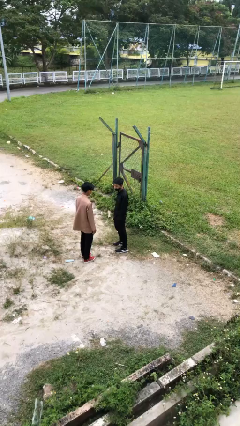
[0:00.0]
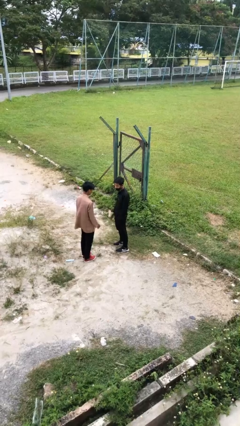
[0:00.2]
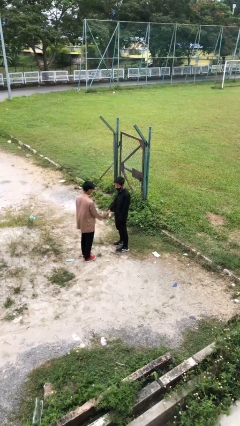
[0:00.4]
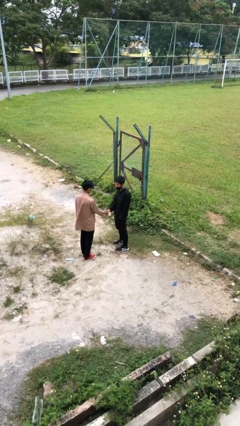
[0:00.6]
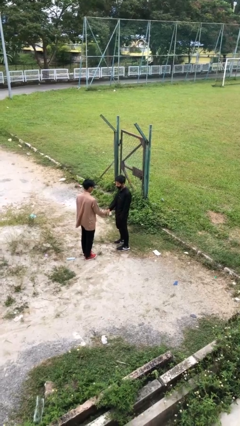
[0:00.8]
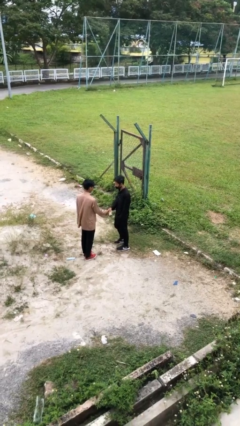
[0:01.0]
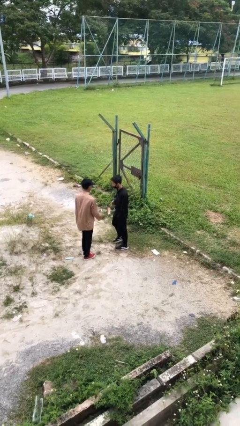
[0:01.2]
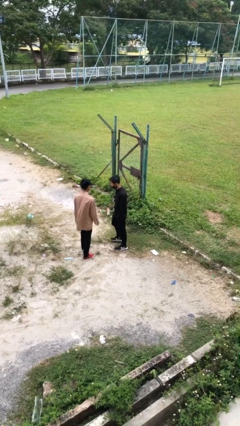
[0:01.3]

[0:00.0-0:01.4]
person shakes hand

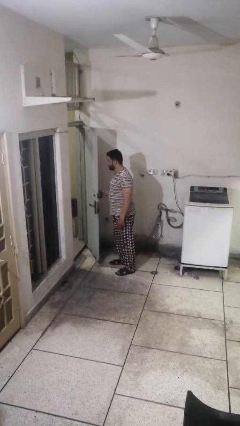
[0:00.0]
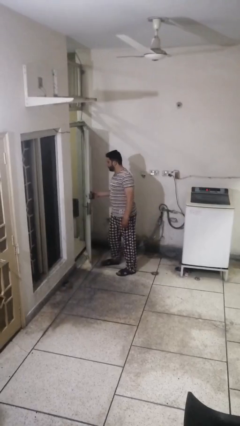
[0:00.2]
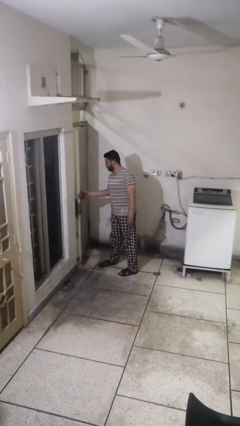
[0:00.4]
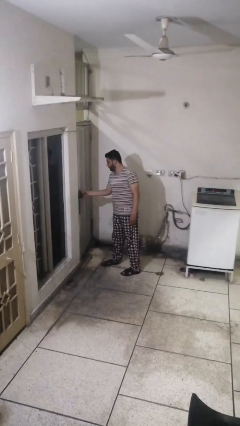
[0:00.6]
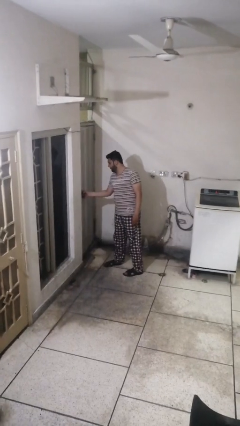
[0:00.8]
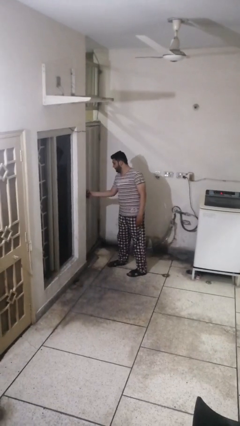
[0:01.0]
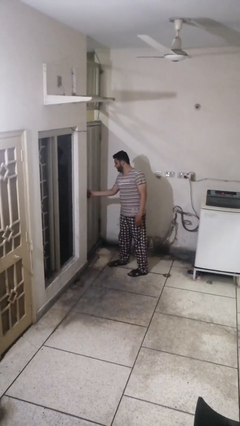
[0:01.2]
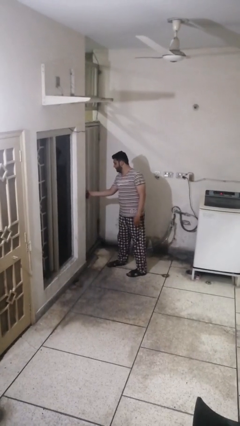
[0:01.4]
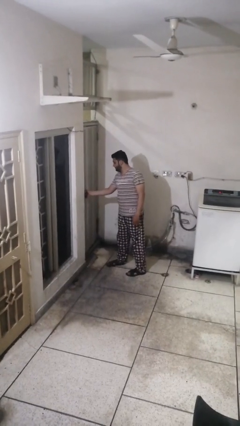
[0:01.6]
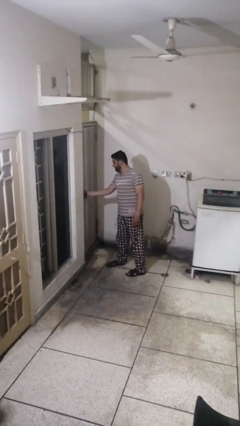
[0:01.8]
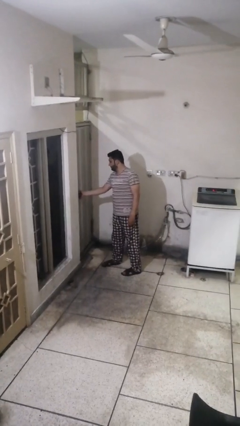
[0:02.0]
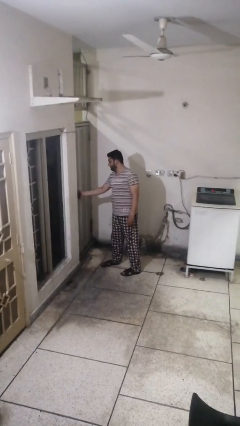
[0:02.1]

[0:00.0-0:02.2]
person closes facility door

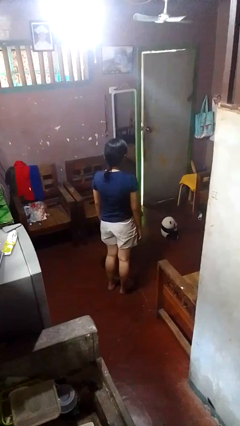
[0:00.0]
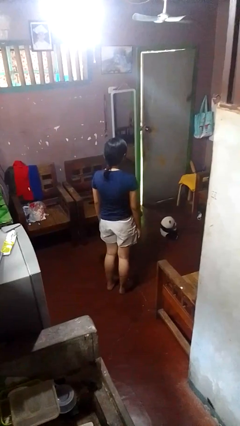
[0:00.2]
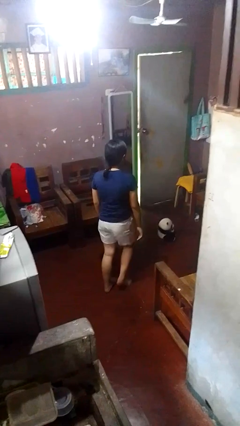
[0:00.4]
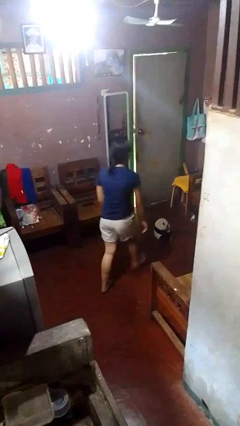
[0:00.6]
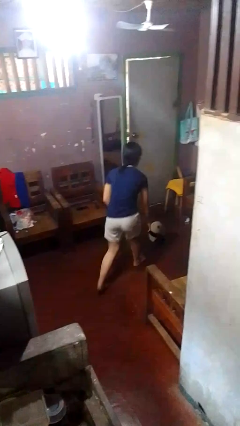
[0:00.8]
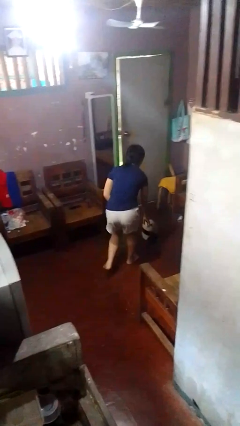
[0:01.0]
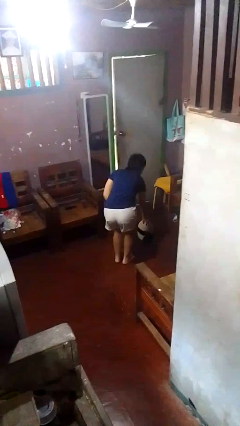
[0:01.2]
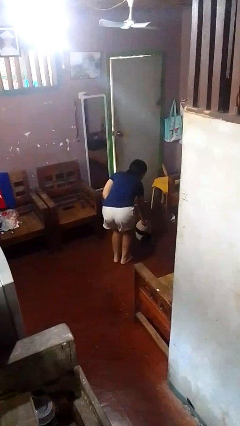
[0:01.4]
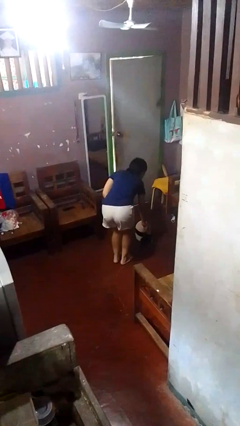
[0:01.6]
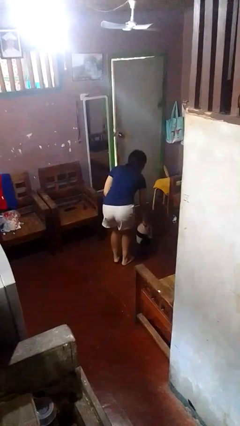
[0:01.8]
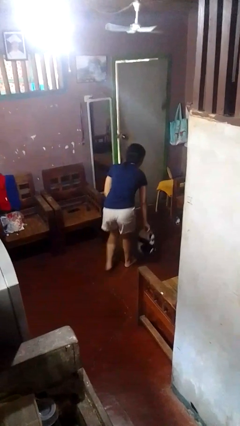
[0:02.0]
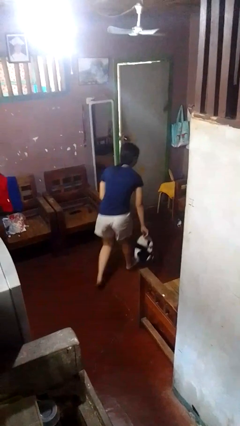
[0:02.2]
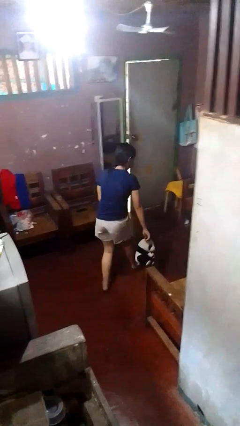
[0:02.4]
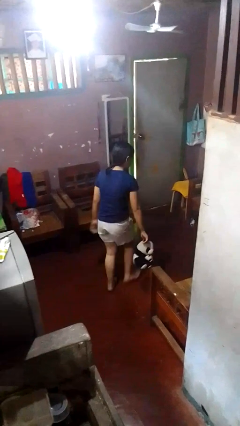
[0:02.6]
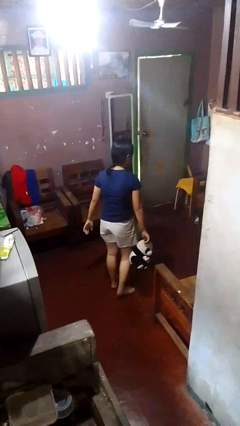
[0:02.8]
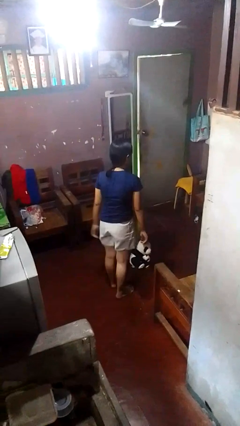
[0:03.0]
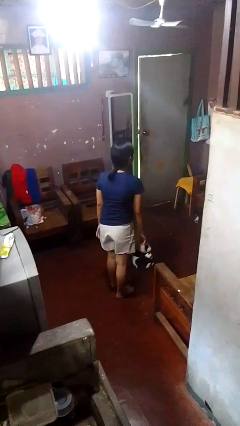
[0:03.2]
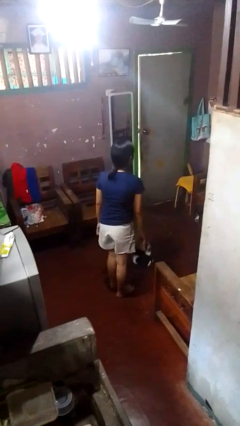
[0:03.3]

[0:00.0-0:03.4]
person picks up object from floor

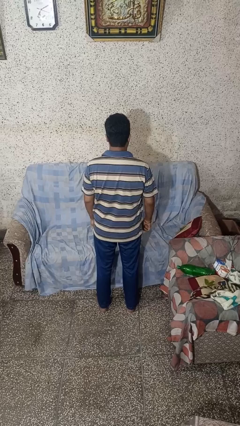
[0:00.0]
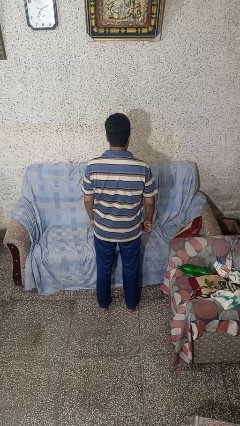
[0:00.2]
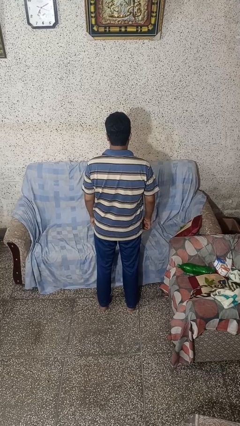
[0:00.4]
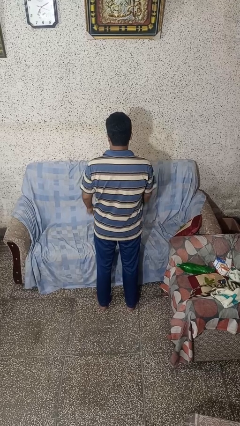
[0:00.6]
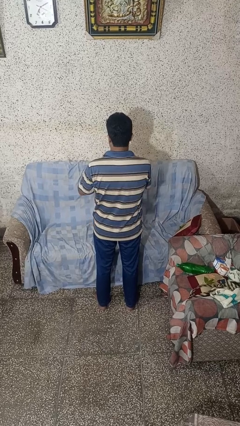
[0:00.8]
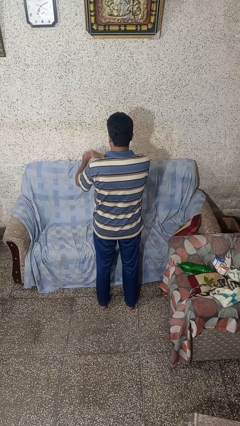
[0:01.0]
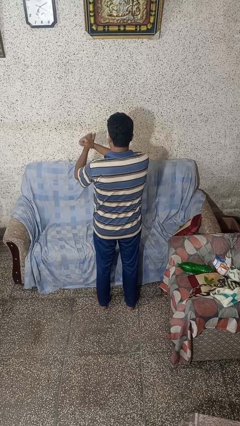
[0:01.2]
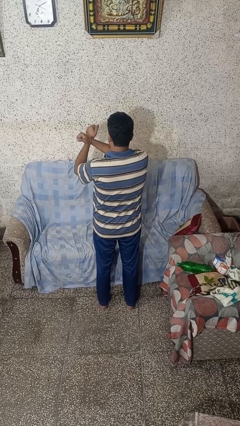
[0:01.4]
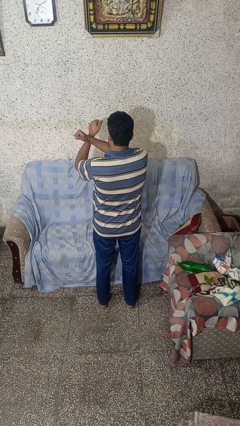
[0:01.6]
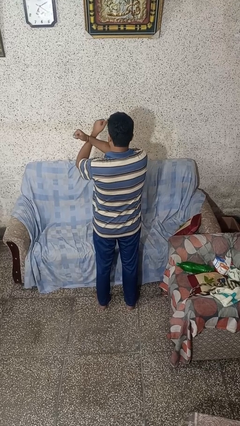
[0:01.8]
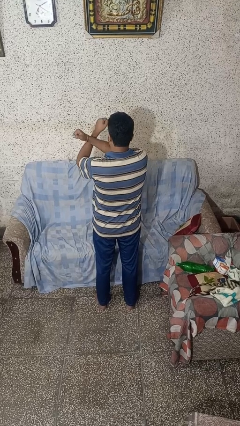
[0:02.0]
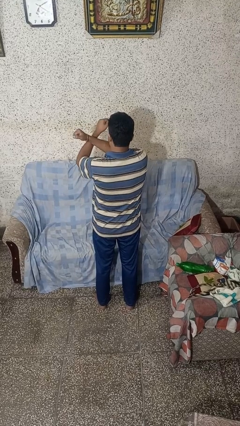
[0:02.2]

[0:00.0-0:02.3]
person gestures arms x

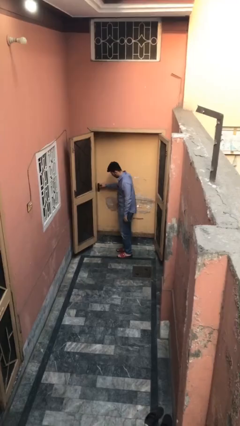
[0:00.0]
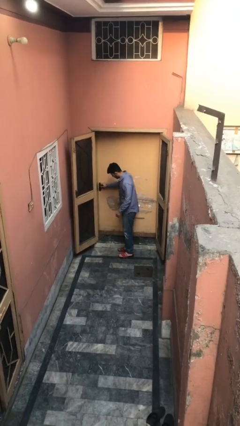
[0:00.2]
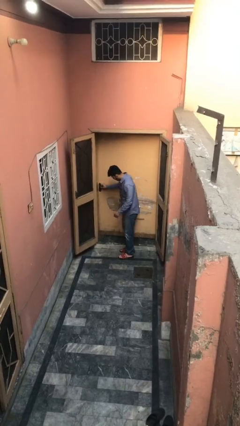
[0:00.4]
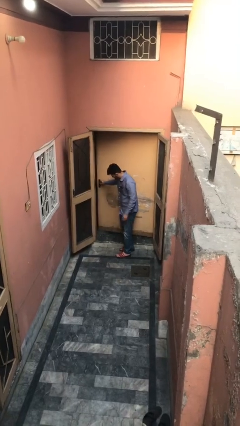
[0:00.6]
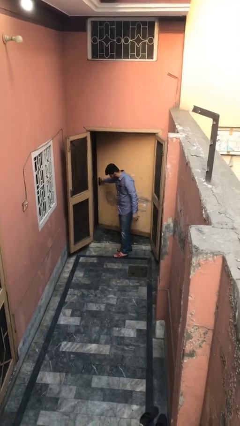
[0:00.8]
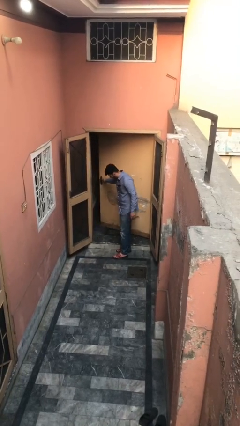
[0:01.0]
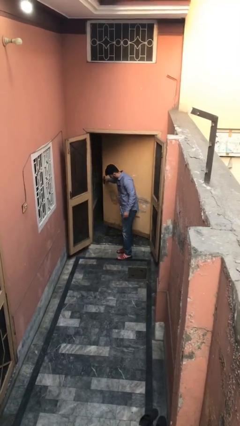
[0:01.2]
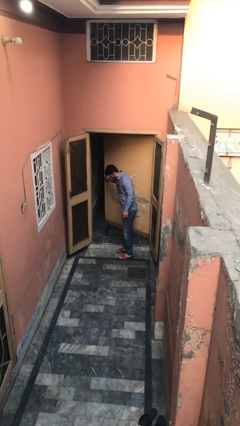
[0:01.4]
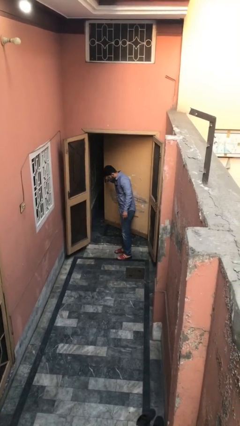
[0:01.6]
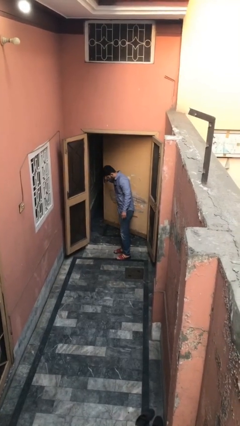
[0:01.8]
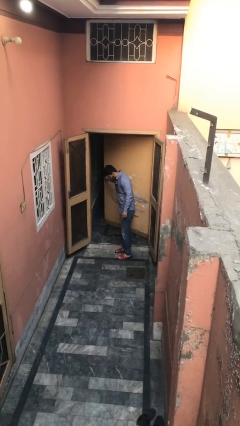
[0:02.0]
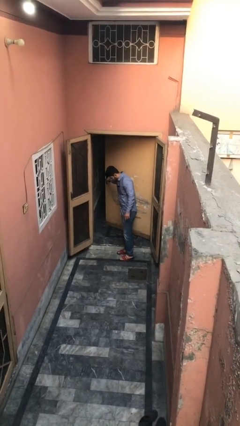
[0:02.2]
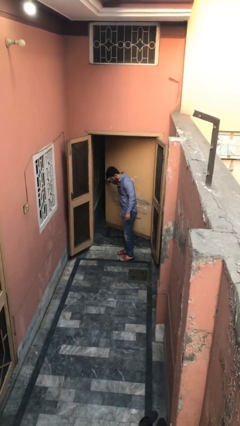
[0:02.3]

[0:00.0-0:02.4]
person opens facility door

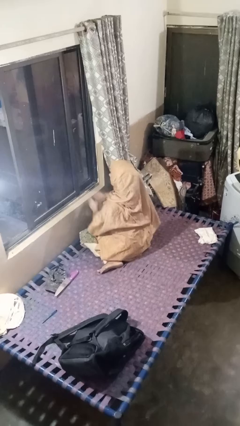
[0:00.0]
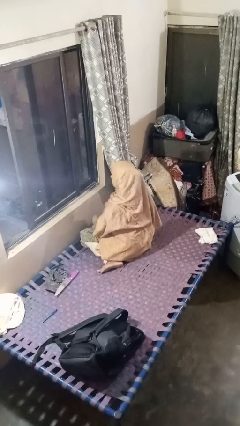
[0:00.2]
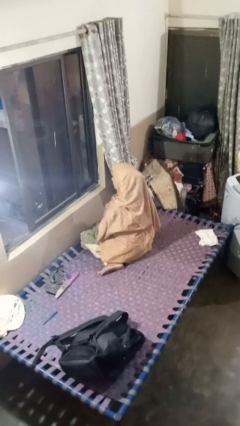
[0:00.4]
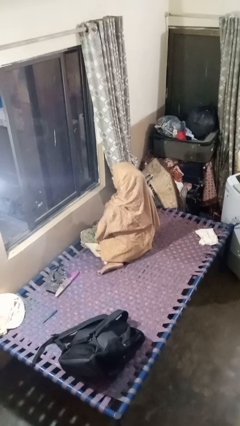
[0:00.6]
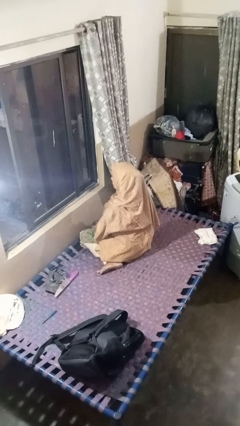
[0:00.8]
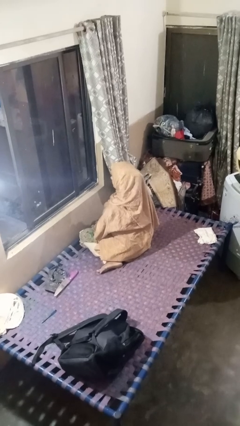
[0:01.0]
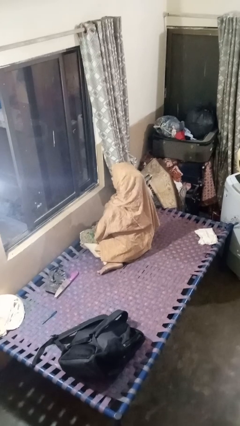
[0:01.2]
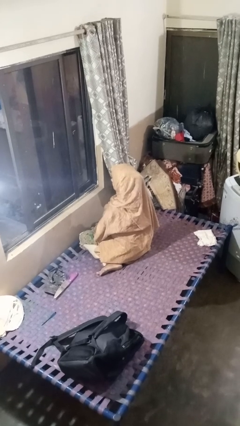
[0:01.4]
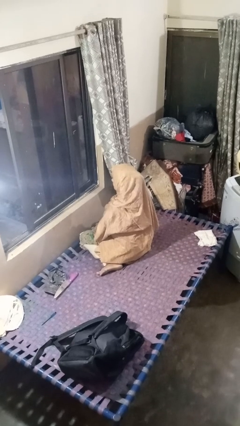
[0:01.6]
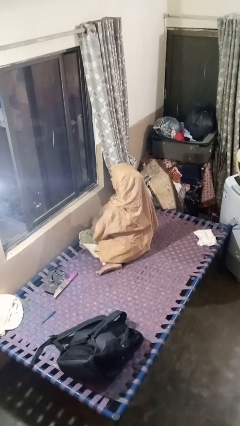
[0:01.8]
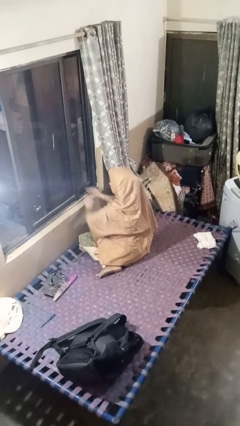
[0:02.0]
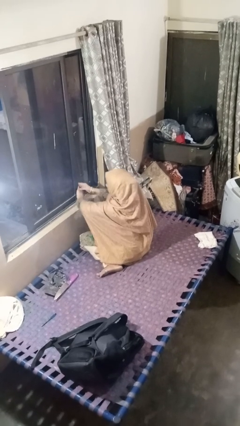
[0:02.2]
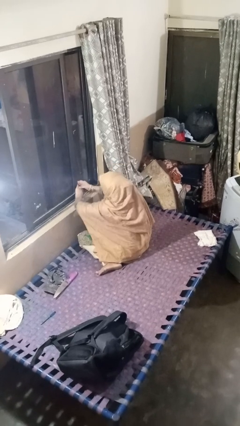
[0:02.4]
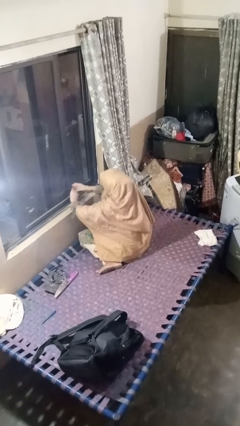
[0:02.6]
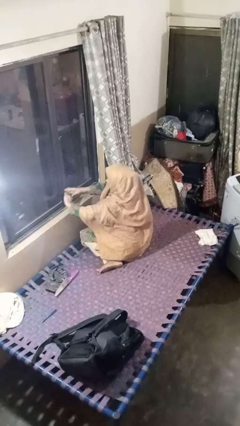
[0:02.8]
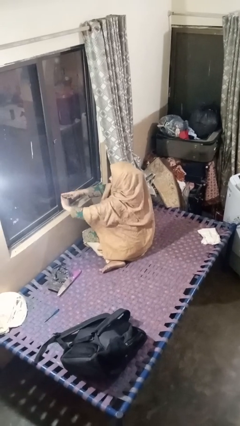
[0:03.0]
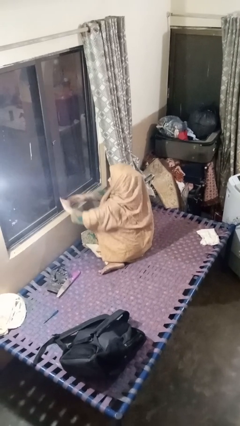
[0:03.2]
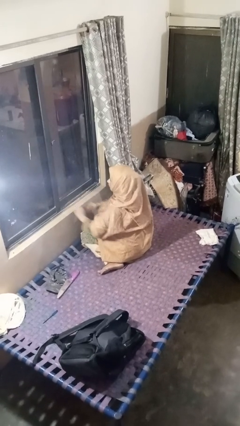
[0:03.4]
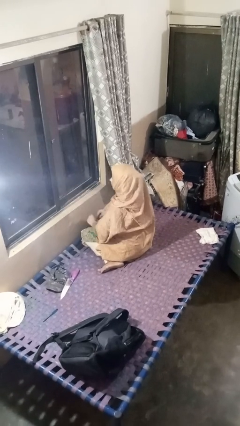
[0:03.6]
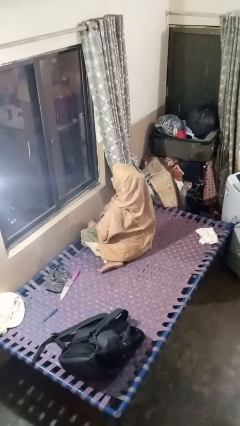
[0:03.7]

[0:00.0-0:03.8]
person closes home window

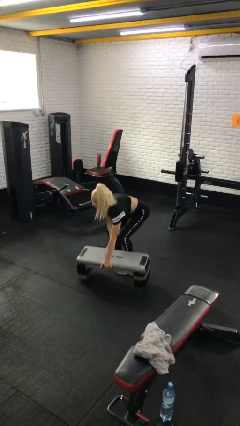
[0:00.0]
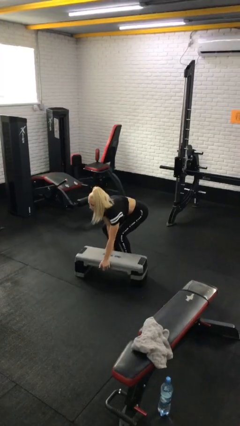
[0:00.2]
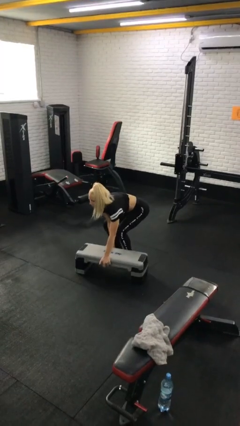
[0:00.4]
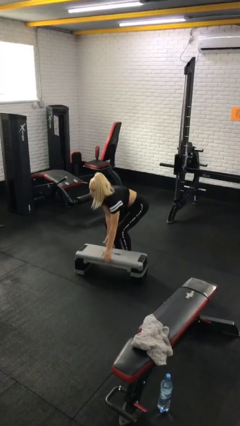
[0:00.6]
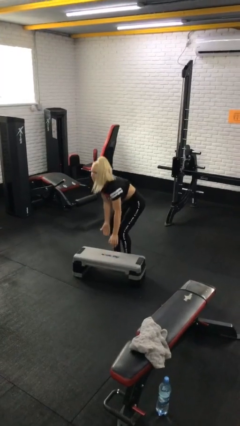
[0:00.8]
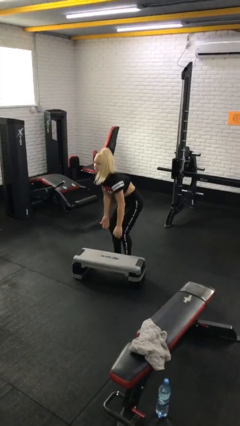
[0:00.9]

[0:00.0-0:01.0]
person puts down object on floor

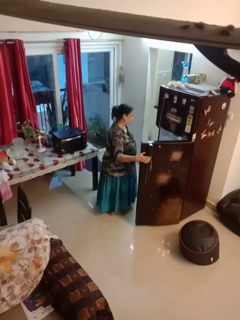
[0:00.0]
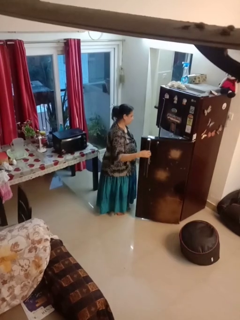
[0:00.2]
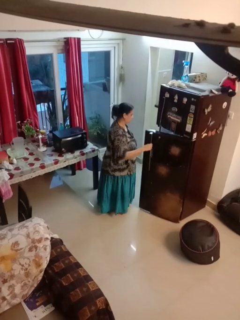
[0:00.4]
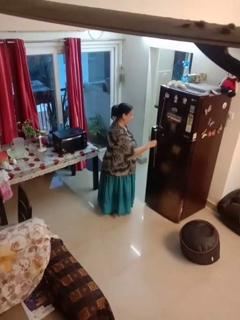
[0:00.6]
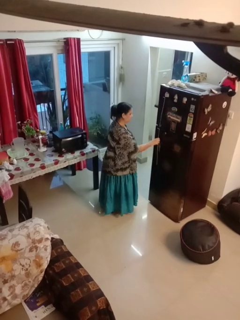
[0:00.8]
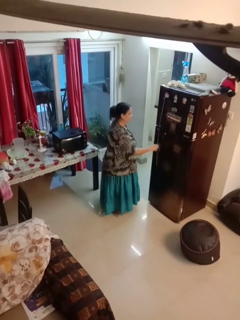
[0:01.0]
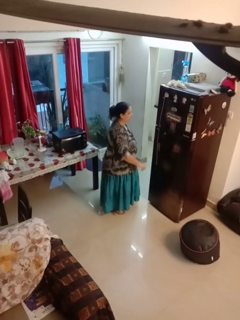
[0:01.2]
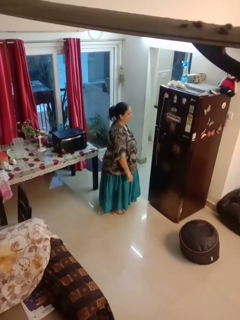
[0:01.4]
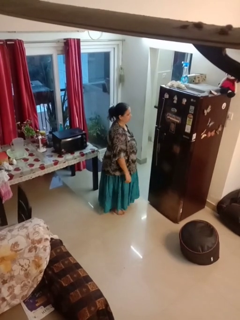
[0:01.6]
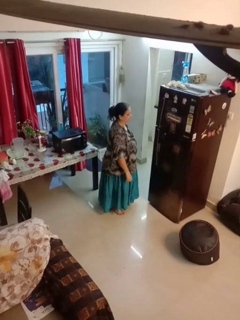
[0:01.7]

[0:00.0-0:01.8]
person closes refrigerator
